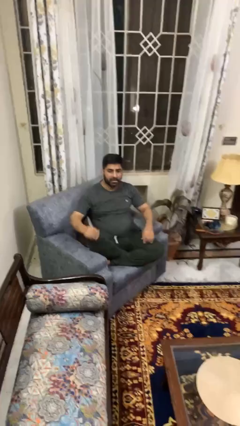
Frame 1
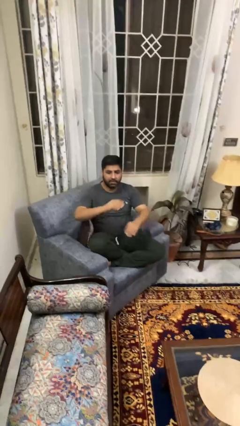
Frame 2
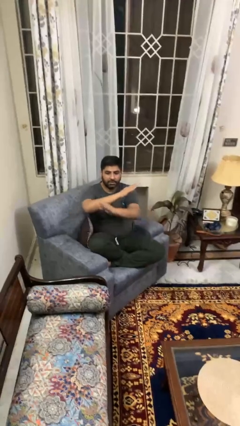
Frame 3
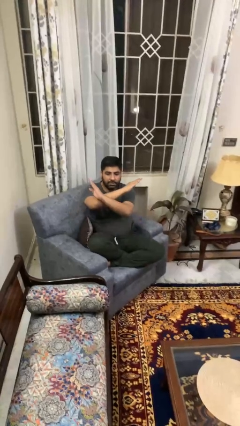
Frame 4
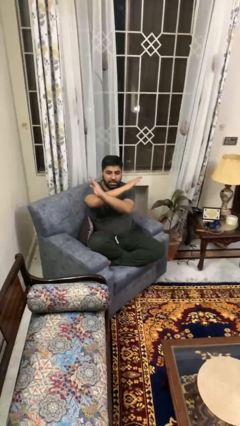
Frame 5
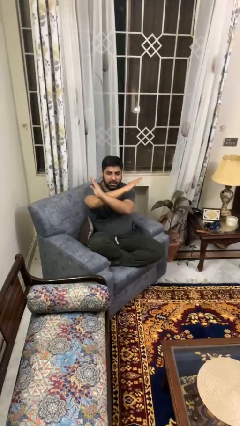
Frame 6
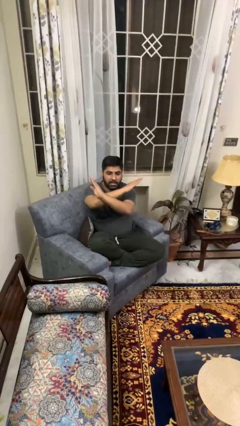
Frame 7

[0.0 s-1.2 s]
person gestures arms x

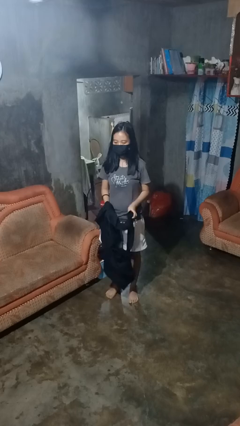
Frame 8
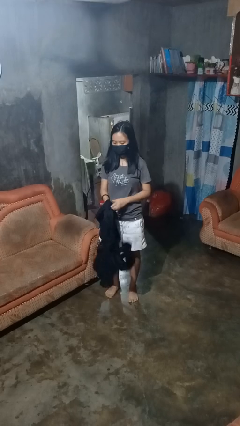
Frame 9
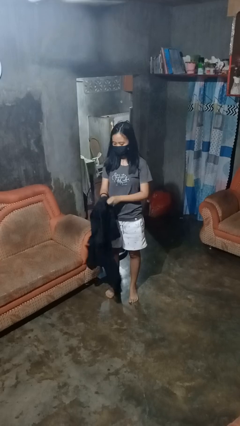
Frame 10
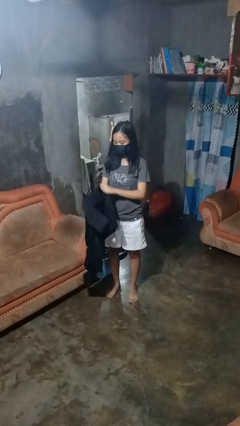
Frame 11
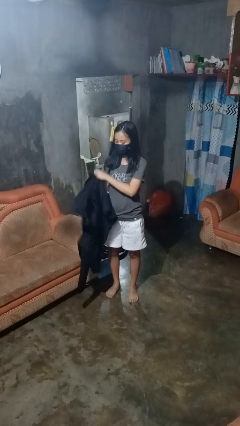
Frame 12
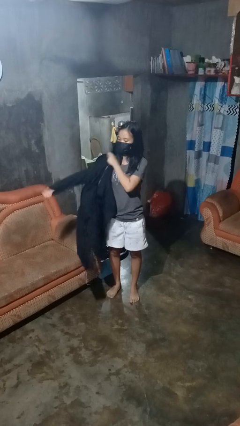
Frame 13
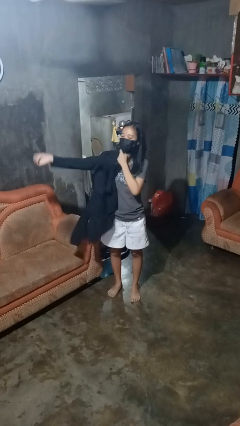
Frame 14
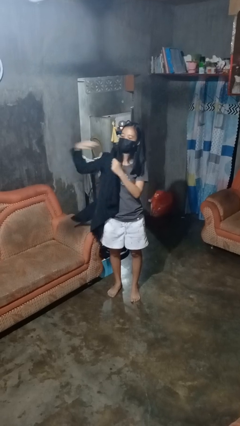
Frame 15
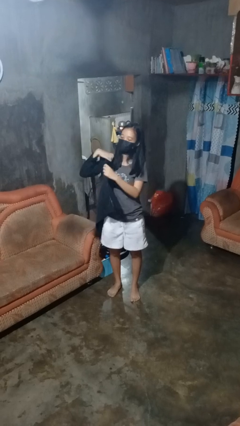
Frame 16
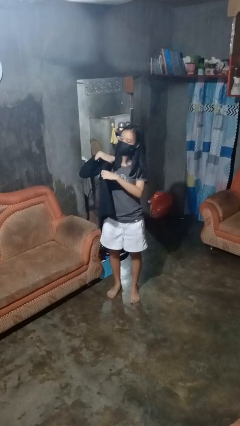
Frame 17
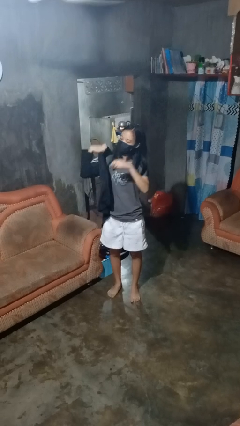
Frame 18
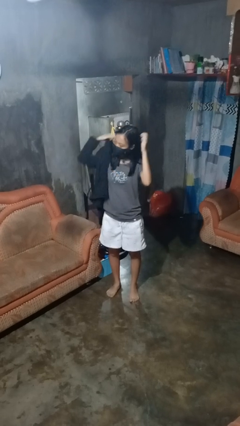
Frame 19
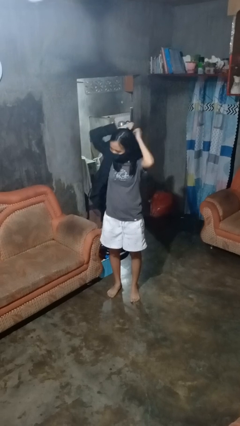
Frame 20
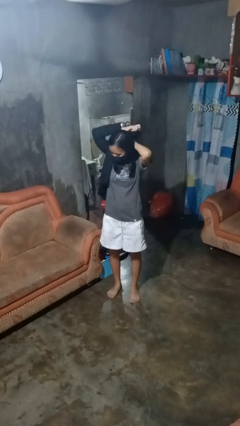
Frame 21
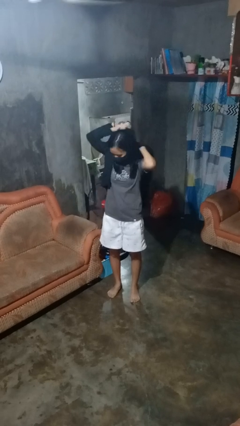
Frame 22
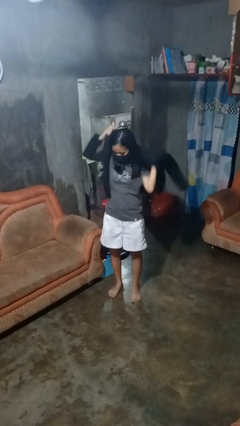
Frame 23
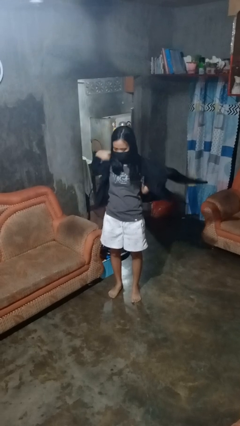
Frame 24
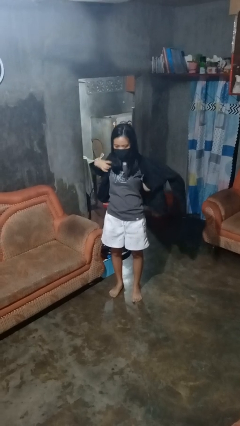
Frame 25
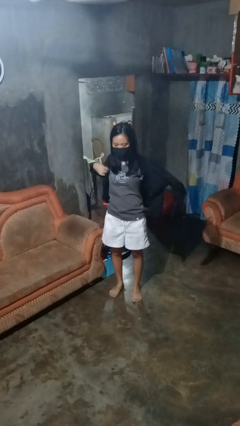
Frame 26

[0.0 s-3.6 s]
person puts on shirt

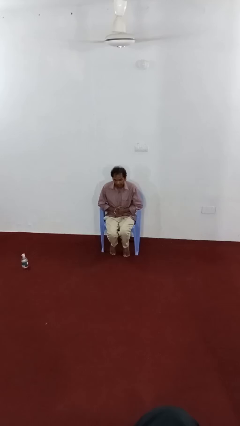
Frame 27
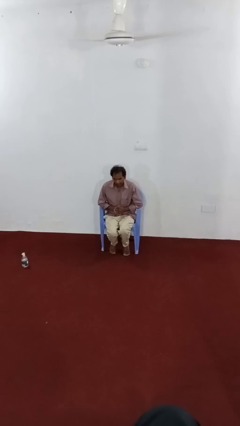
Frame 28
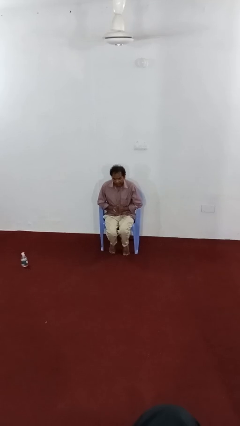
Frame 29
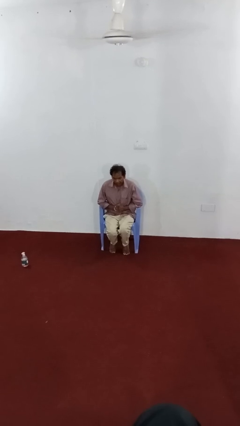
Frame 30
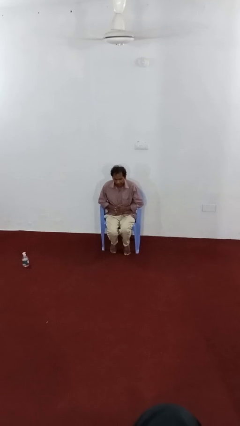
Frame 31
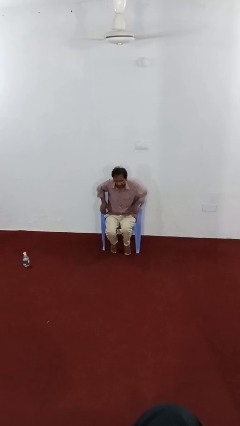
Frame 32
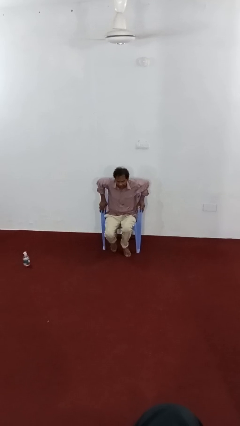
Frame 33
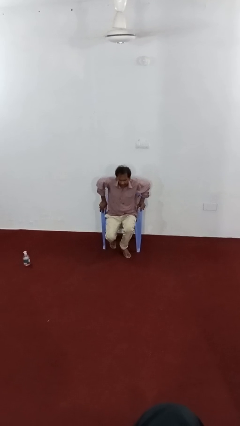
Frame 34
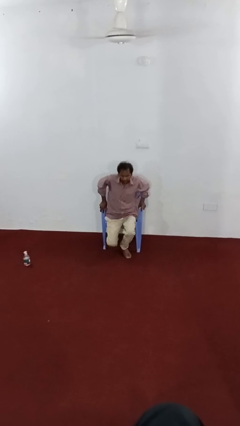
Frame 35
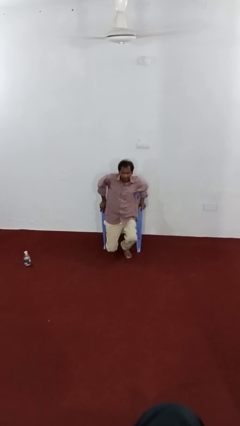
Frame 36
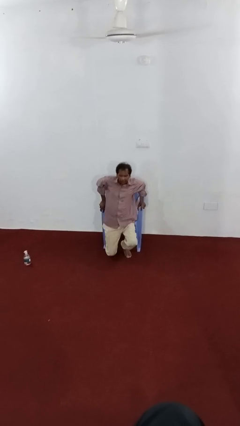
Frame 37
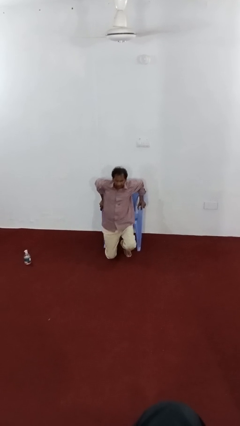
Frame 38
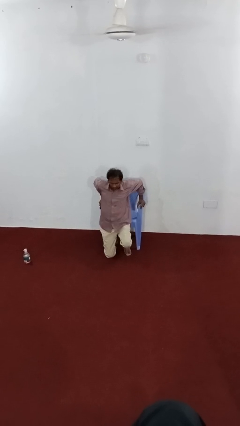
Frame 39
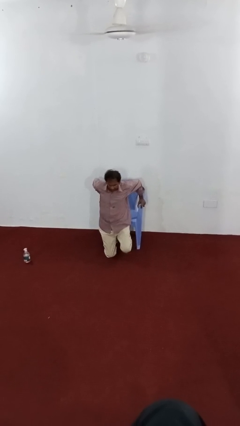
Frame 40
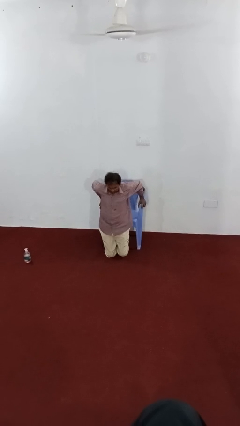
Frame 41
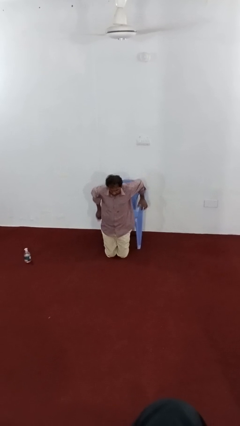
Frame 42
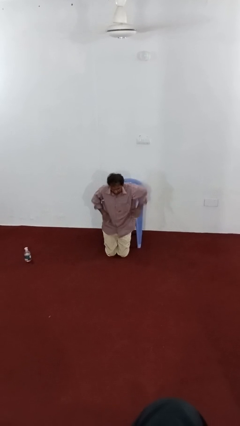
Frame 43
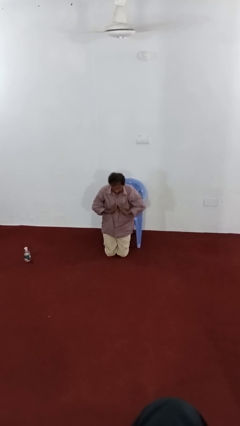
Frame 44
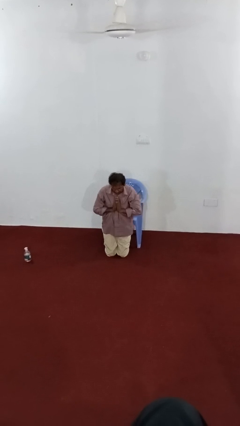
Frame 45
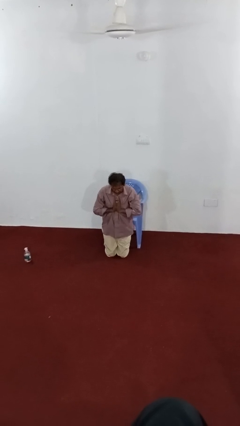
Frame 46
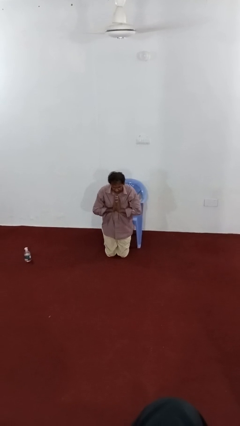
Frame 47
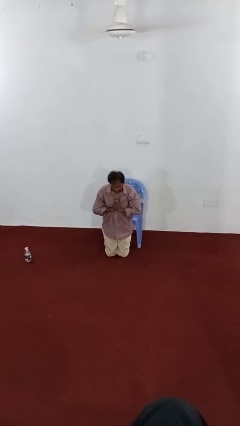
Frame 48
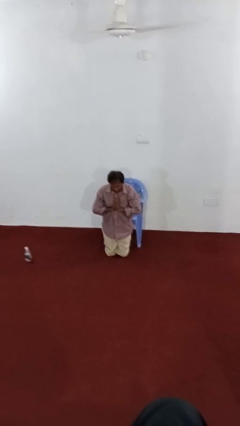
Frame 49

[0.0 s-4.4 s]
person prays

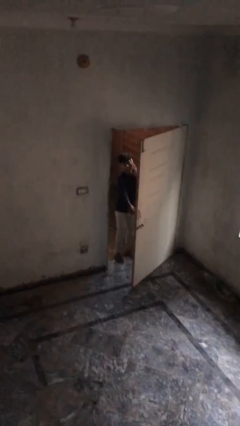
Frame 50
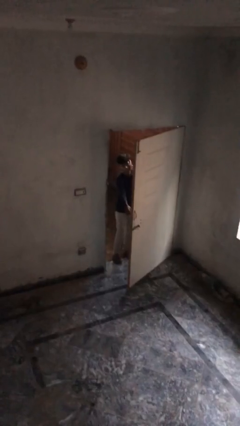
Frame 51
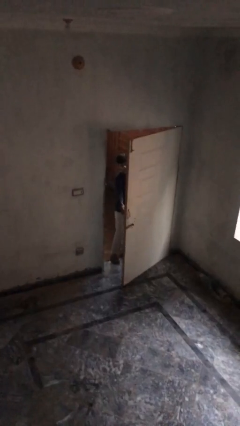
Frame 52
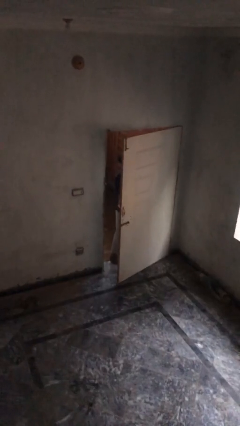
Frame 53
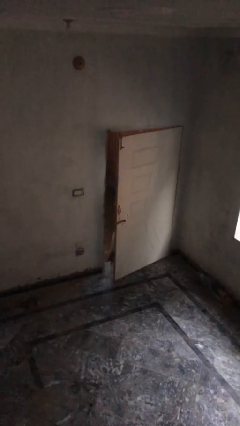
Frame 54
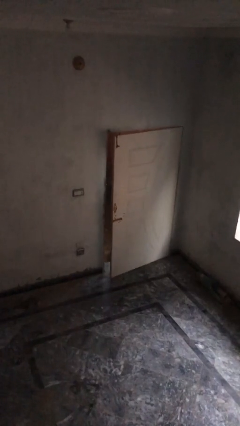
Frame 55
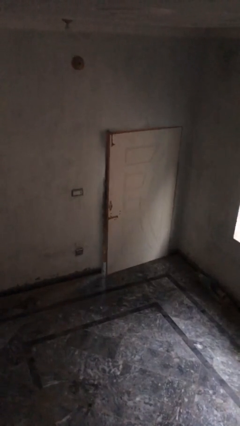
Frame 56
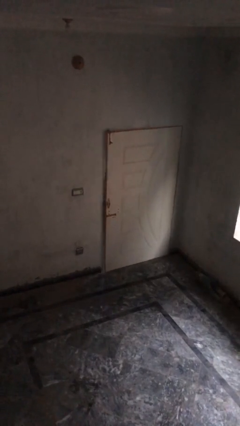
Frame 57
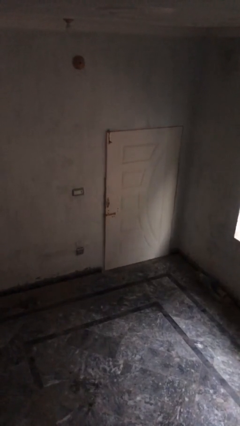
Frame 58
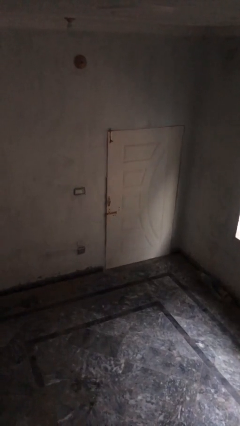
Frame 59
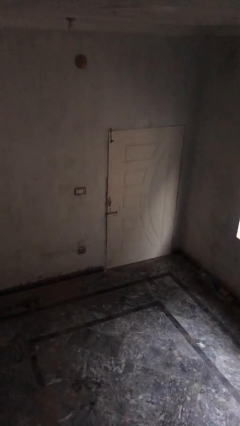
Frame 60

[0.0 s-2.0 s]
person closes facility door

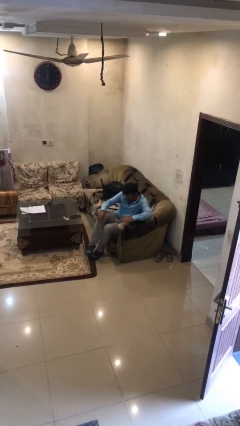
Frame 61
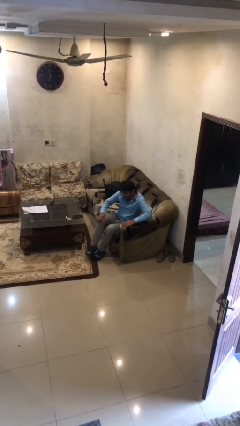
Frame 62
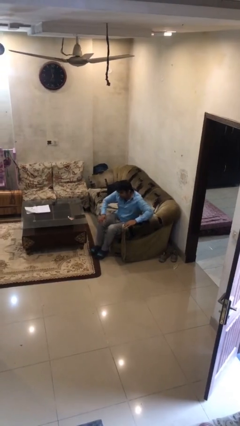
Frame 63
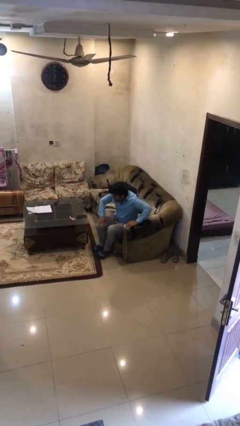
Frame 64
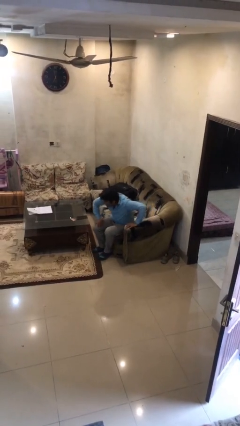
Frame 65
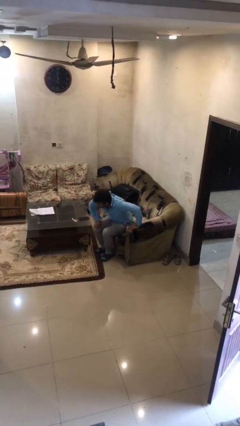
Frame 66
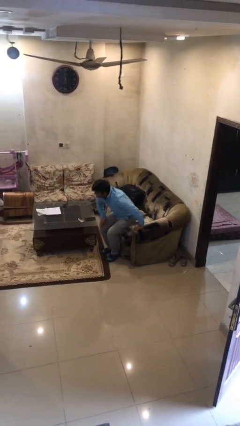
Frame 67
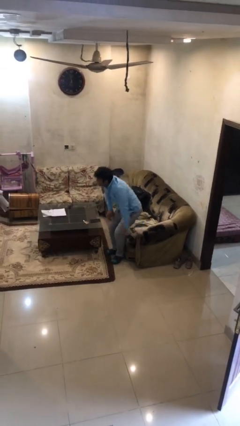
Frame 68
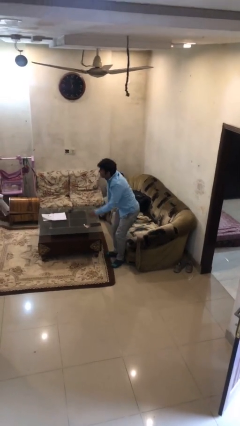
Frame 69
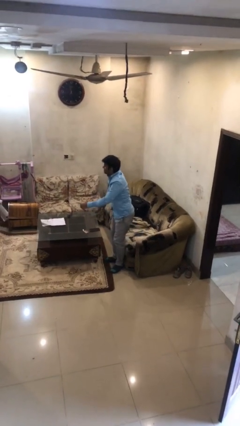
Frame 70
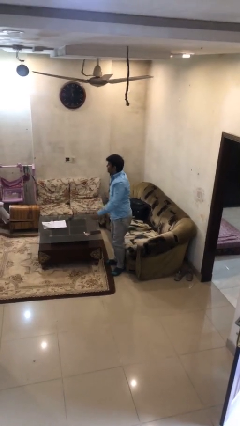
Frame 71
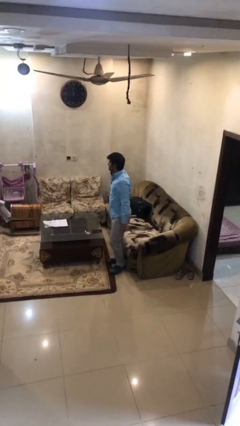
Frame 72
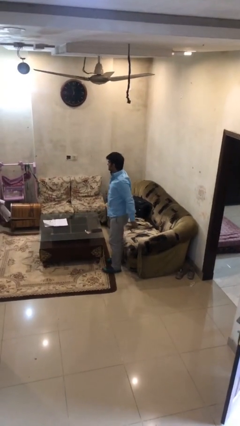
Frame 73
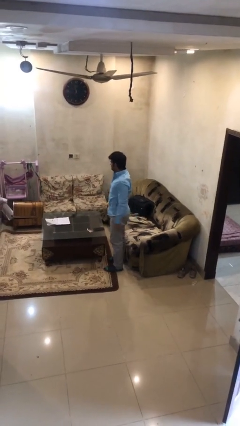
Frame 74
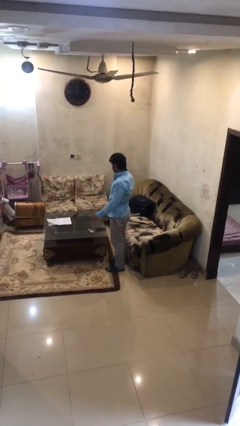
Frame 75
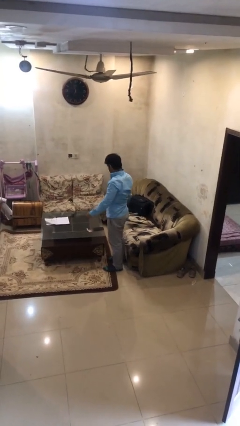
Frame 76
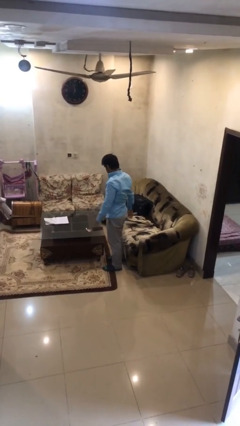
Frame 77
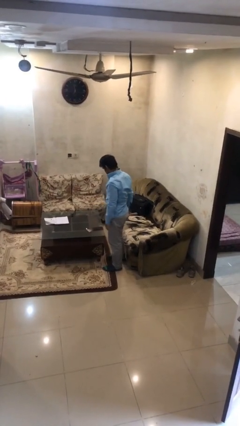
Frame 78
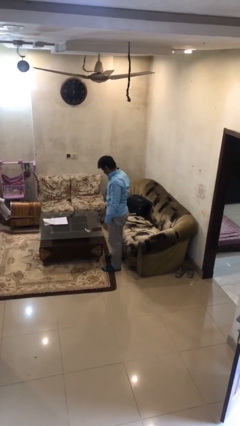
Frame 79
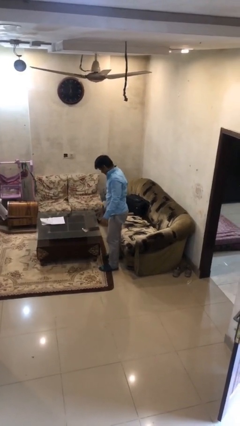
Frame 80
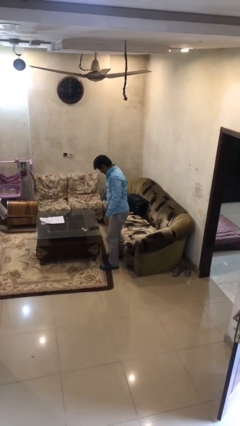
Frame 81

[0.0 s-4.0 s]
person stands up

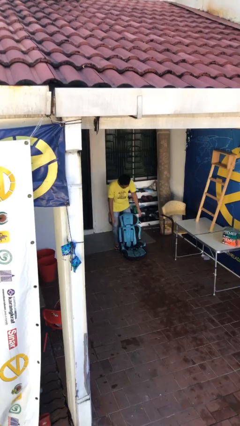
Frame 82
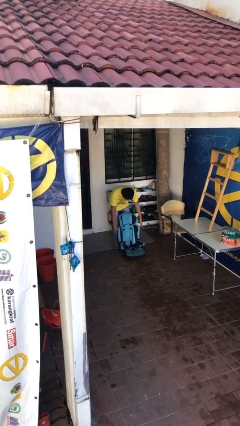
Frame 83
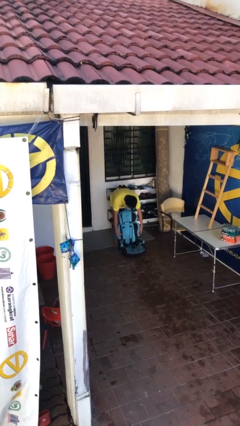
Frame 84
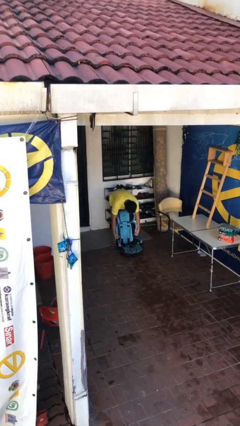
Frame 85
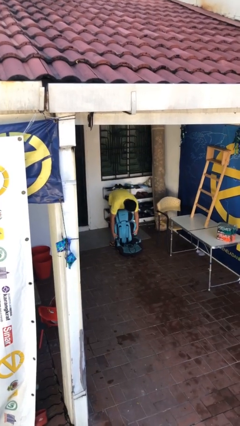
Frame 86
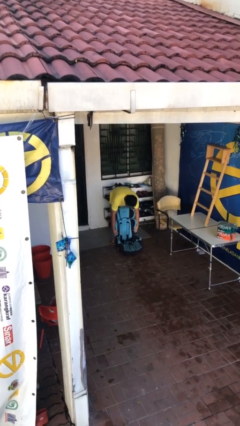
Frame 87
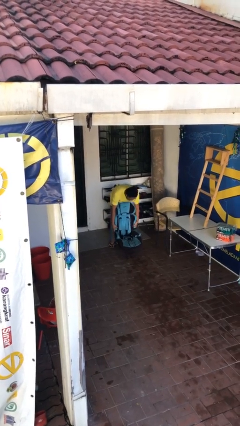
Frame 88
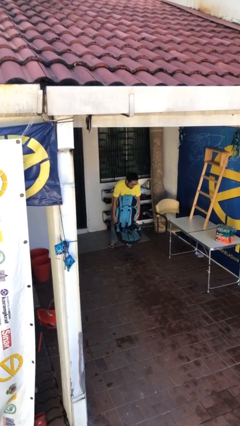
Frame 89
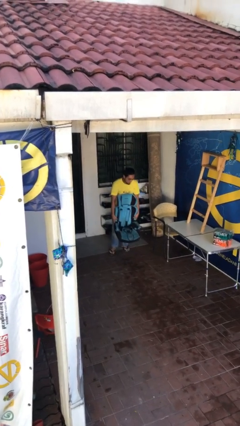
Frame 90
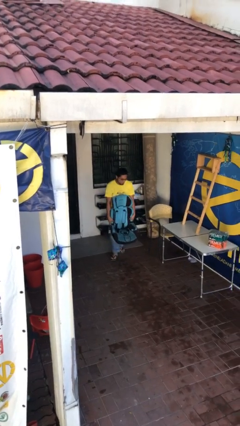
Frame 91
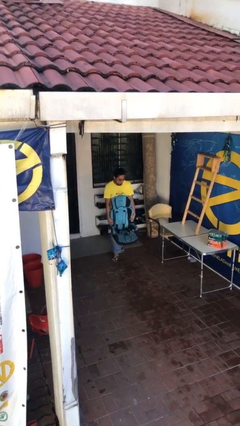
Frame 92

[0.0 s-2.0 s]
person picks up object from floor
